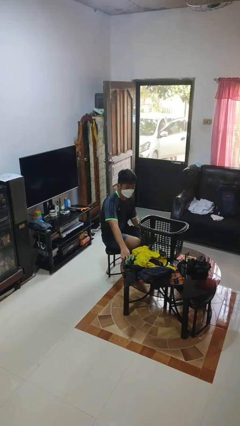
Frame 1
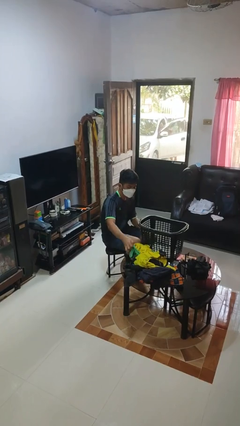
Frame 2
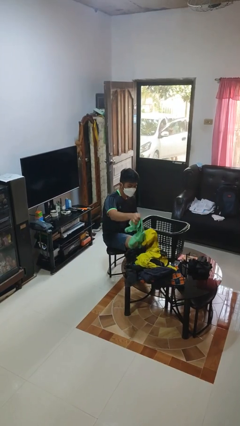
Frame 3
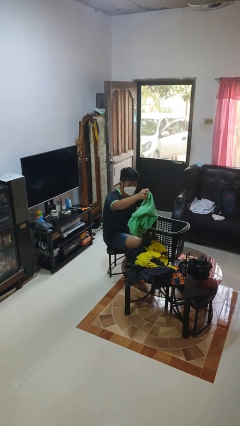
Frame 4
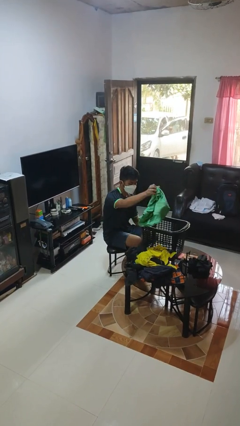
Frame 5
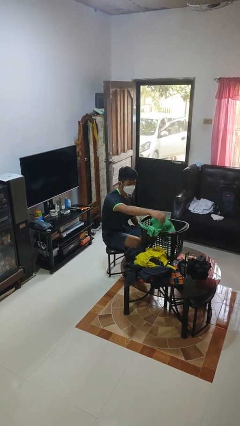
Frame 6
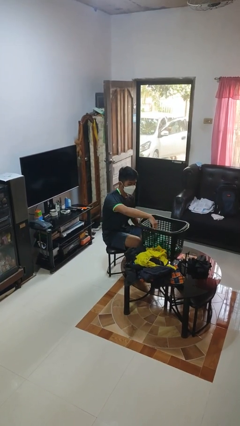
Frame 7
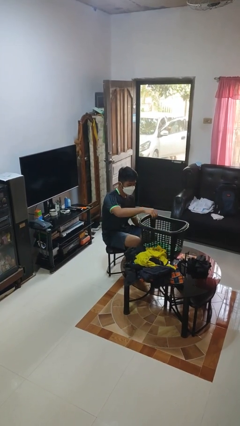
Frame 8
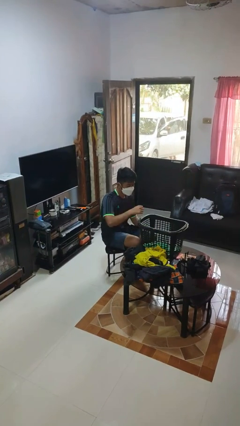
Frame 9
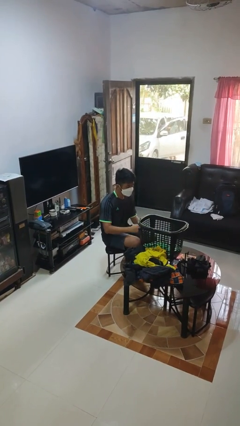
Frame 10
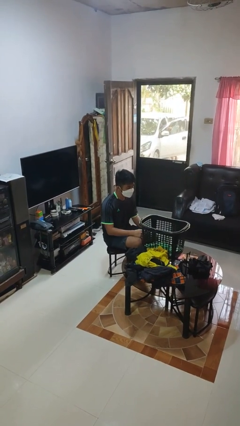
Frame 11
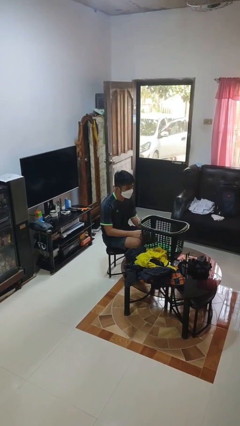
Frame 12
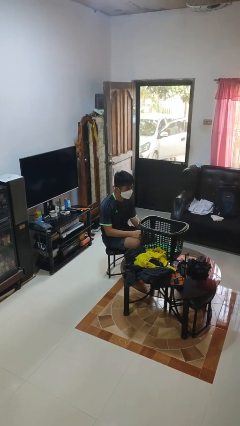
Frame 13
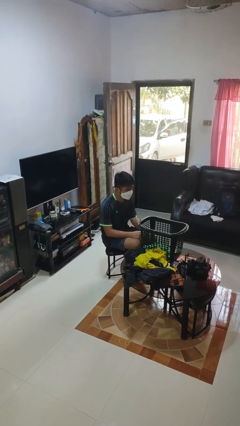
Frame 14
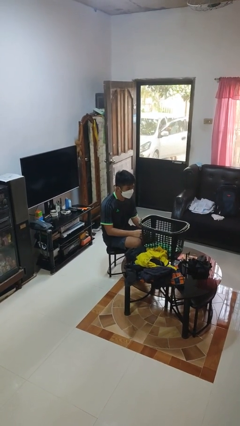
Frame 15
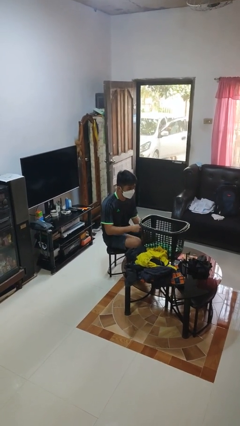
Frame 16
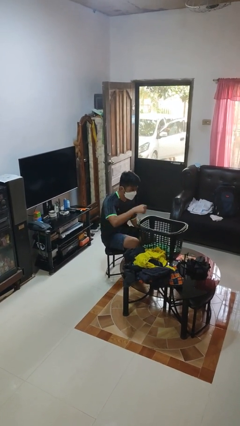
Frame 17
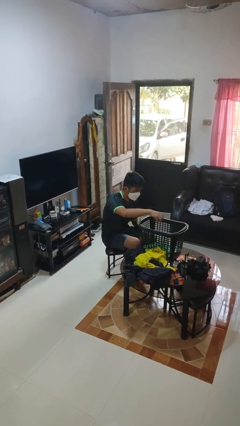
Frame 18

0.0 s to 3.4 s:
person puts object into basket

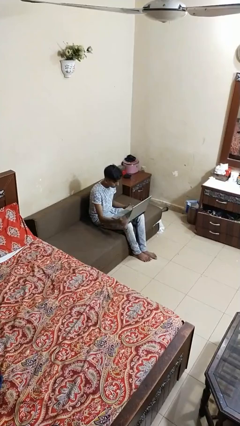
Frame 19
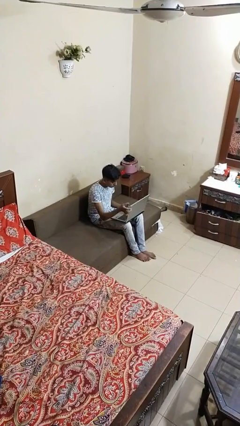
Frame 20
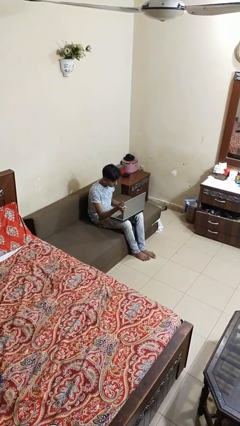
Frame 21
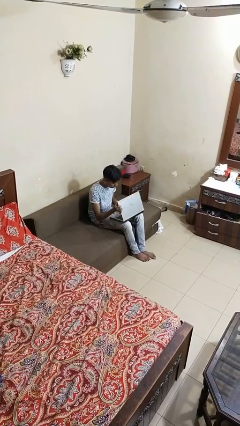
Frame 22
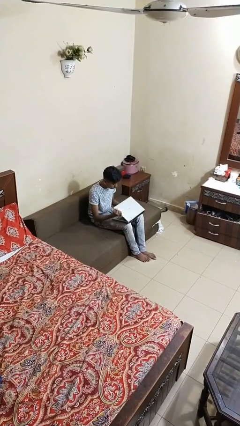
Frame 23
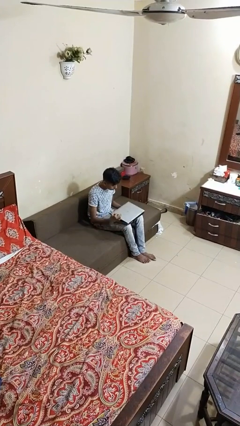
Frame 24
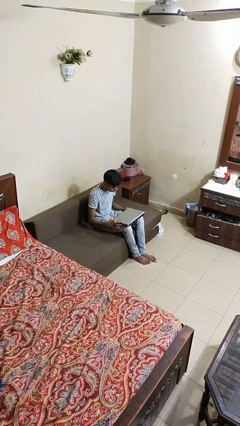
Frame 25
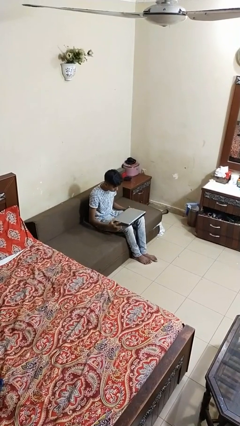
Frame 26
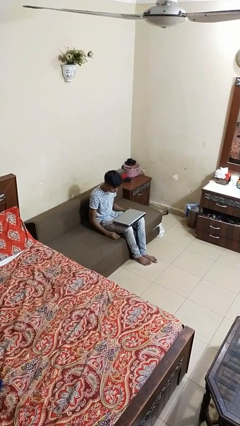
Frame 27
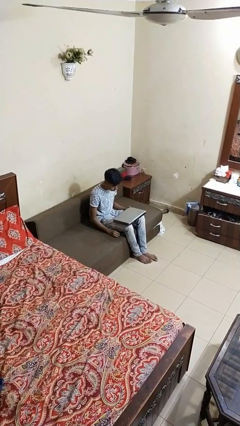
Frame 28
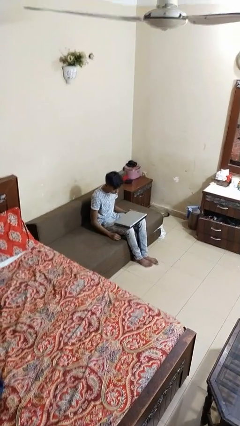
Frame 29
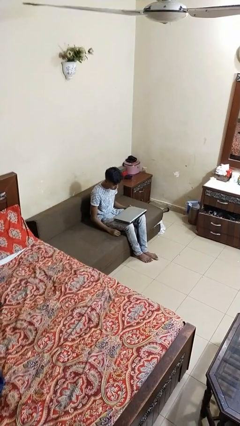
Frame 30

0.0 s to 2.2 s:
person closes laptop

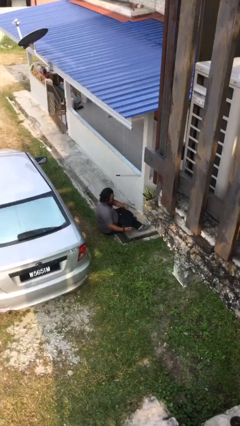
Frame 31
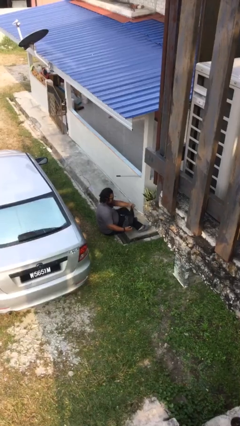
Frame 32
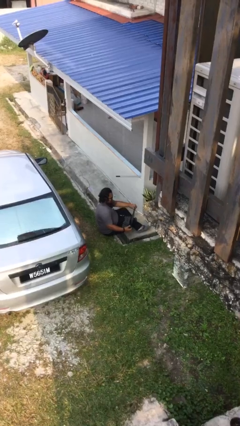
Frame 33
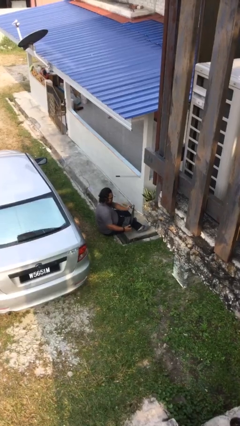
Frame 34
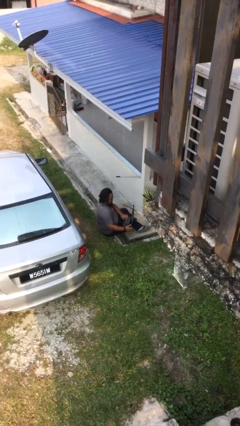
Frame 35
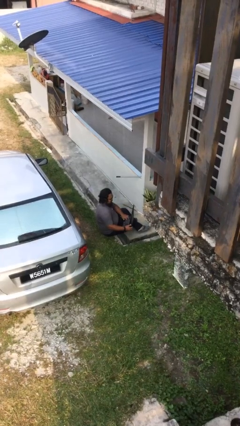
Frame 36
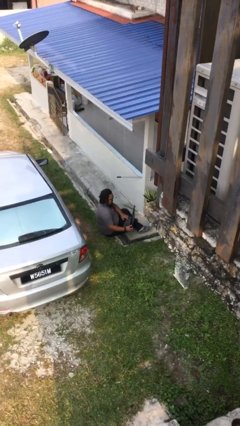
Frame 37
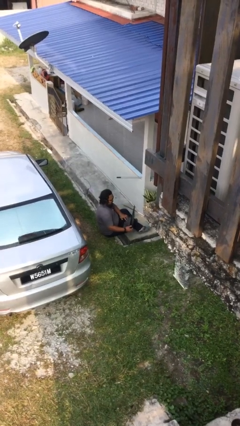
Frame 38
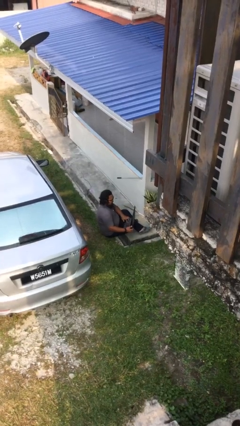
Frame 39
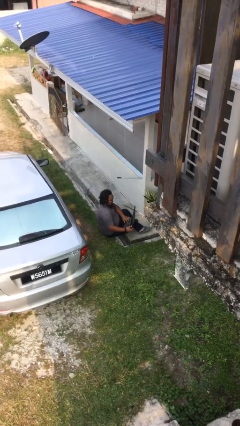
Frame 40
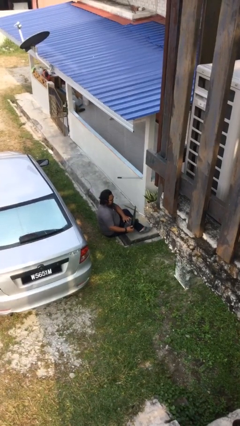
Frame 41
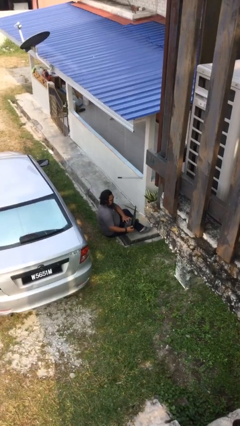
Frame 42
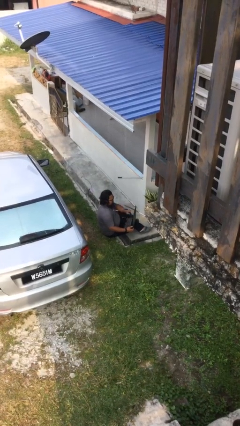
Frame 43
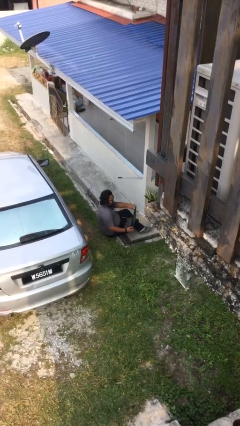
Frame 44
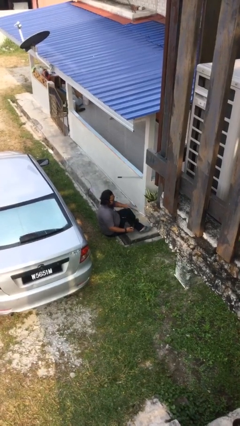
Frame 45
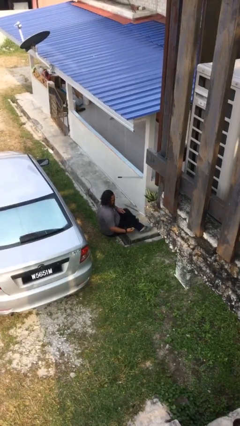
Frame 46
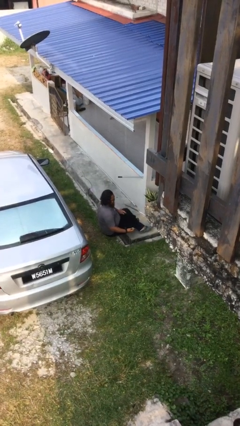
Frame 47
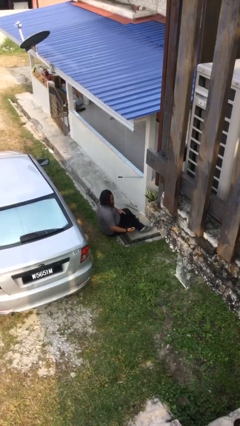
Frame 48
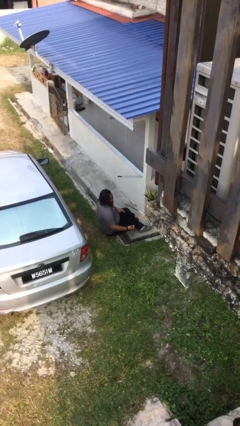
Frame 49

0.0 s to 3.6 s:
person interacts with laptop

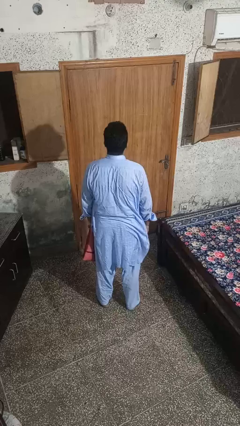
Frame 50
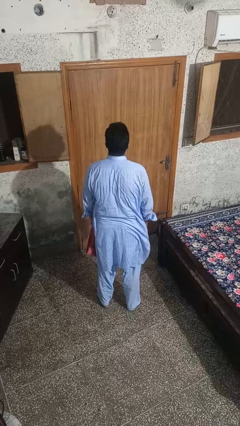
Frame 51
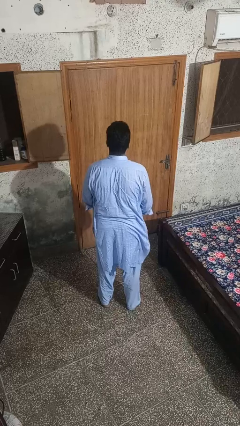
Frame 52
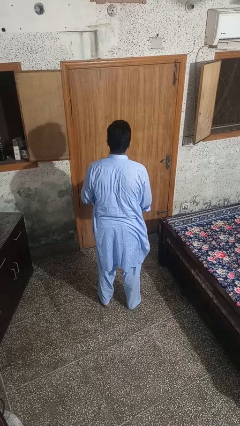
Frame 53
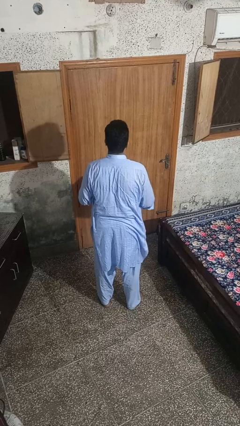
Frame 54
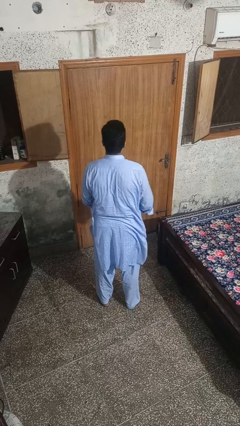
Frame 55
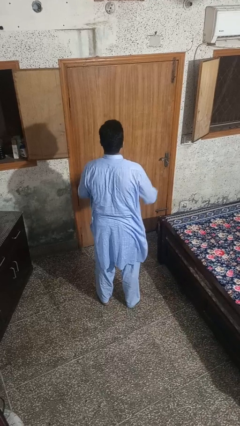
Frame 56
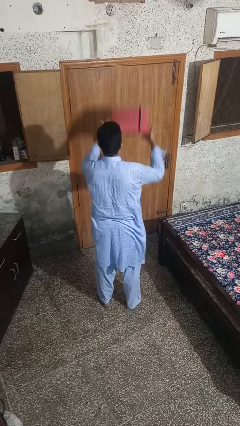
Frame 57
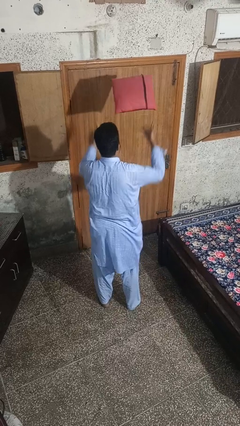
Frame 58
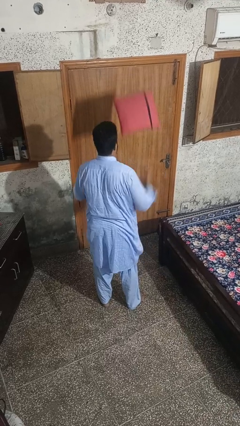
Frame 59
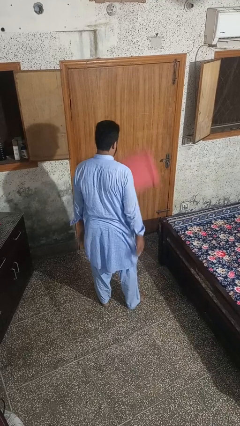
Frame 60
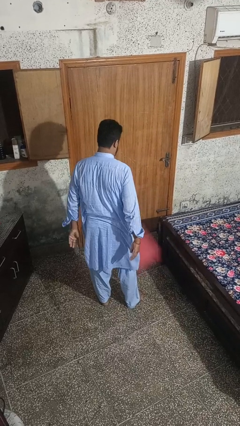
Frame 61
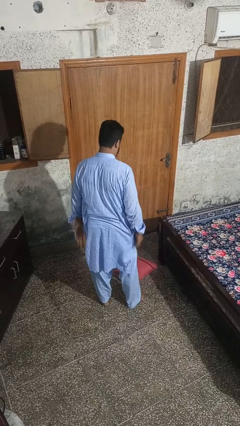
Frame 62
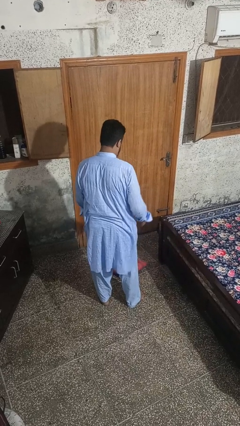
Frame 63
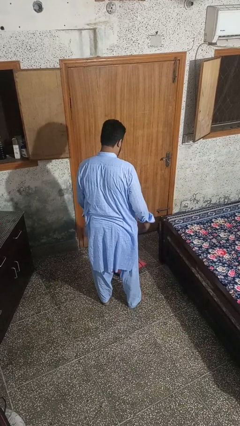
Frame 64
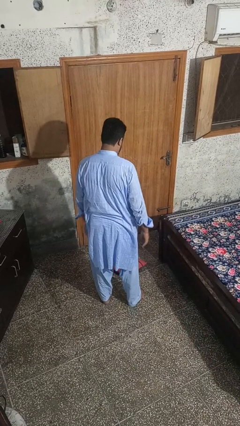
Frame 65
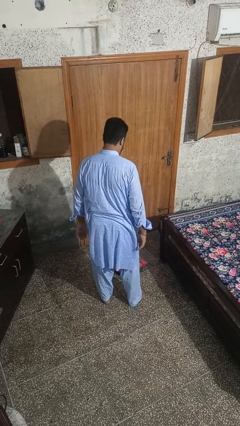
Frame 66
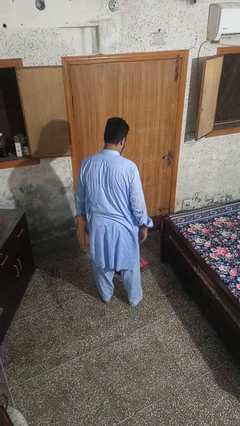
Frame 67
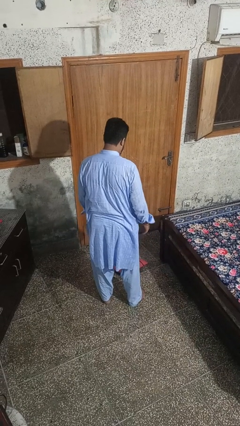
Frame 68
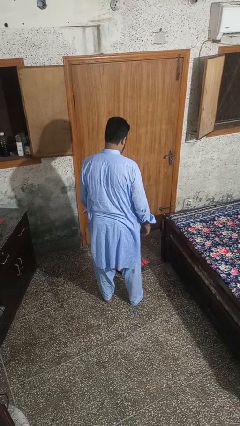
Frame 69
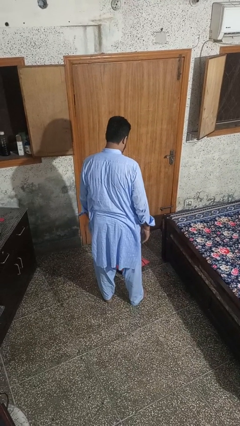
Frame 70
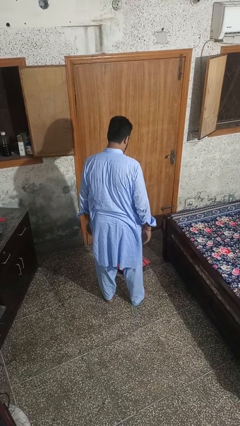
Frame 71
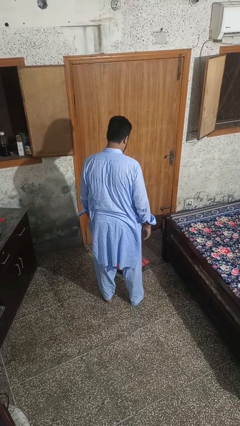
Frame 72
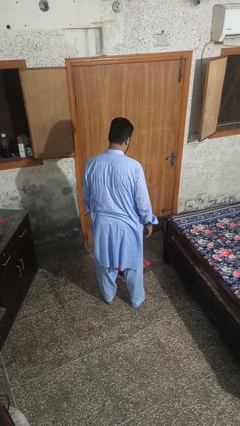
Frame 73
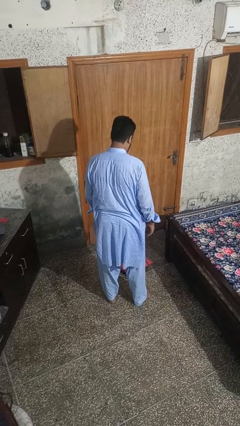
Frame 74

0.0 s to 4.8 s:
person throws object into air

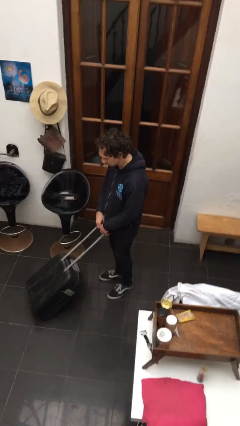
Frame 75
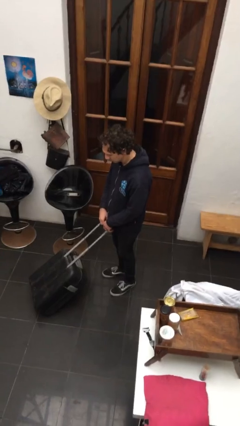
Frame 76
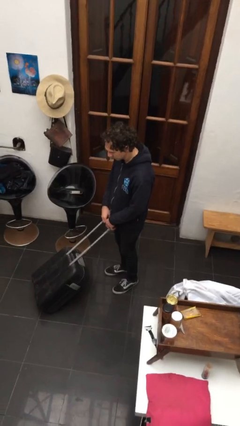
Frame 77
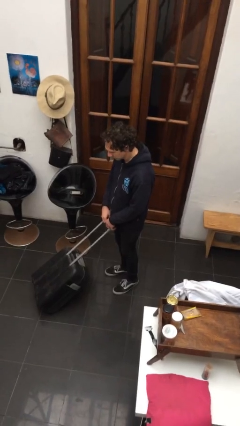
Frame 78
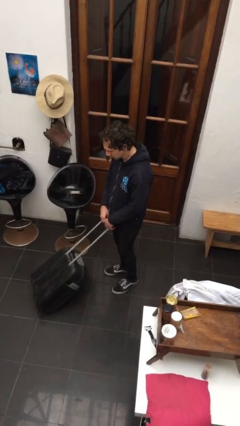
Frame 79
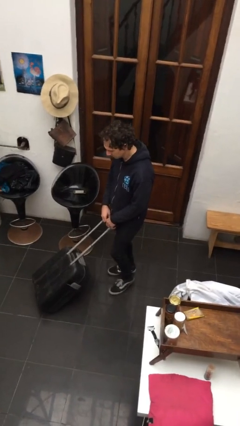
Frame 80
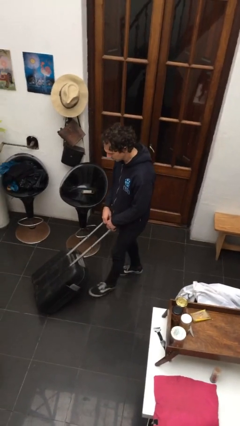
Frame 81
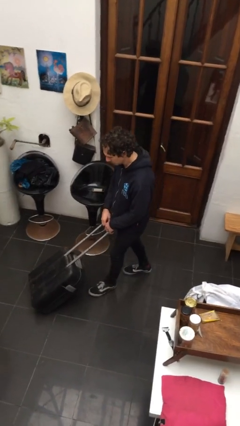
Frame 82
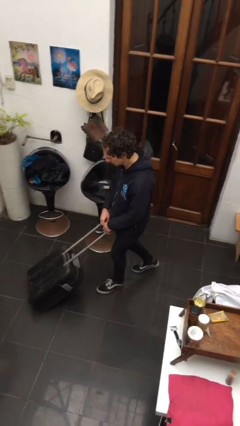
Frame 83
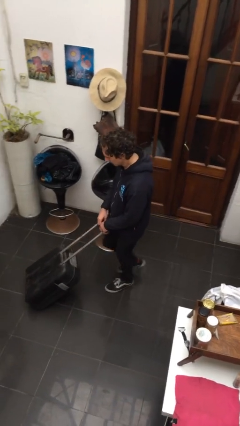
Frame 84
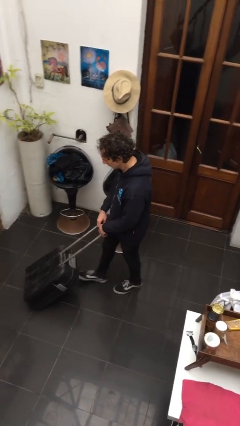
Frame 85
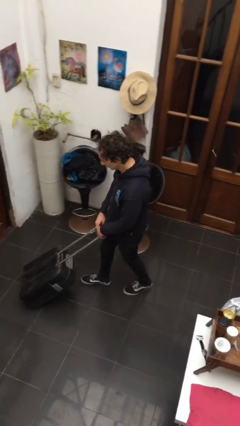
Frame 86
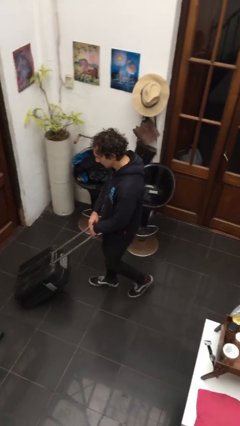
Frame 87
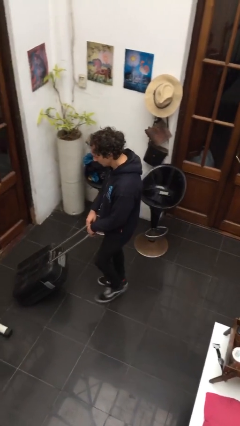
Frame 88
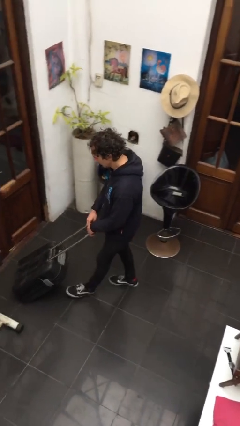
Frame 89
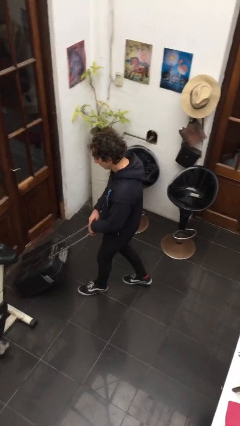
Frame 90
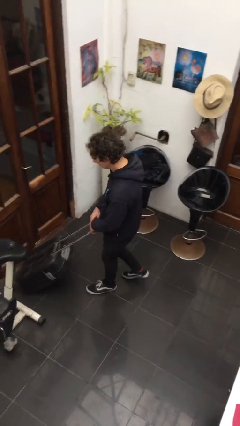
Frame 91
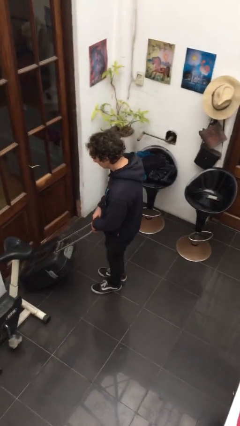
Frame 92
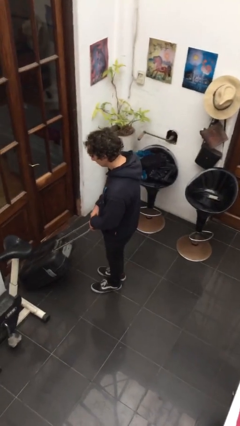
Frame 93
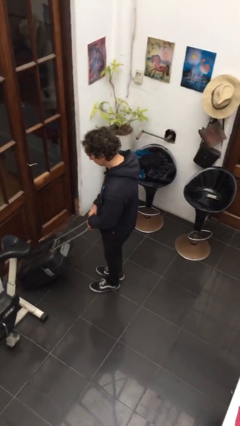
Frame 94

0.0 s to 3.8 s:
person pushes wheeled cart
